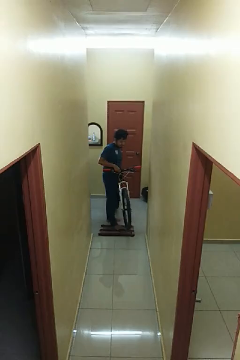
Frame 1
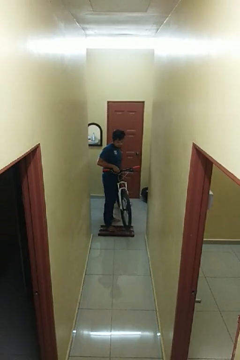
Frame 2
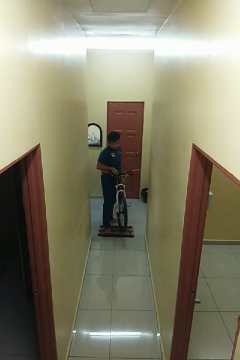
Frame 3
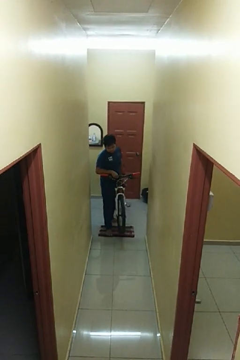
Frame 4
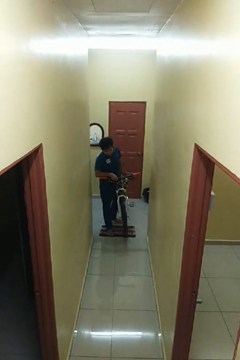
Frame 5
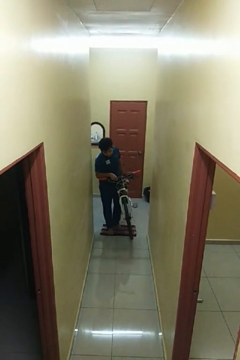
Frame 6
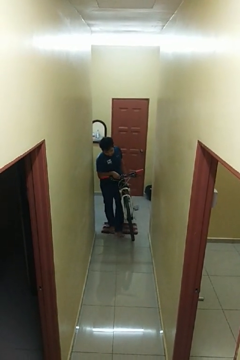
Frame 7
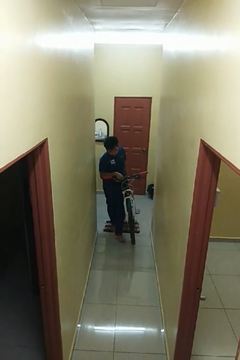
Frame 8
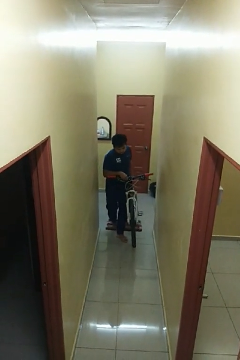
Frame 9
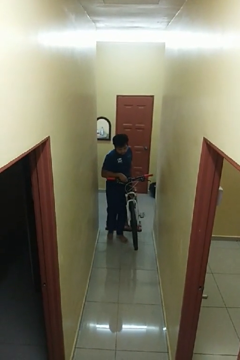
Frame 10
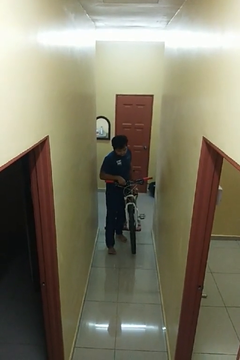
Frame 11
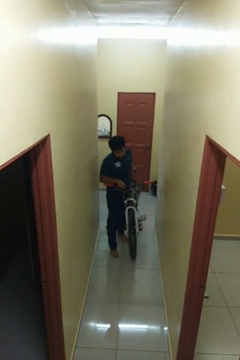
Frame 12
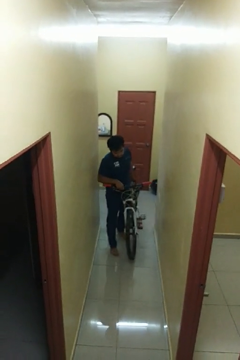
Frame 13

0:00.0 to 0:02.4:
person carries bicycle

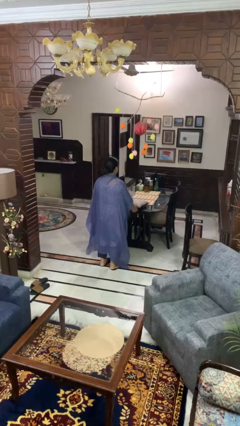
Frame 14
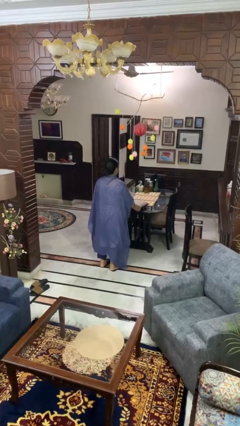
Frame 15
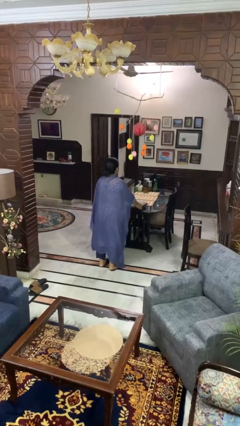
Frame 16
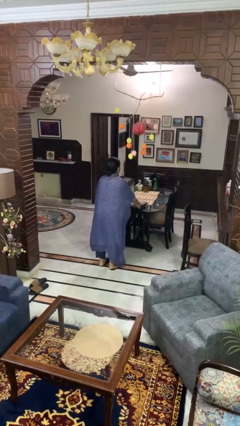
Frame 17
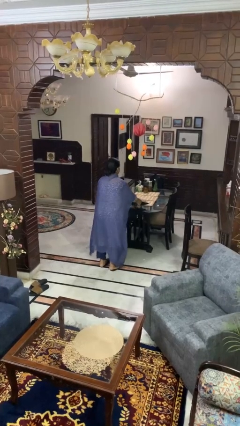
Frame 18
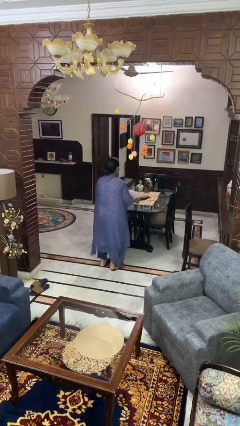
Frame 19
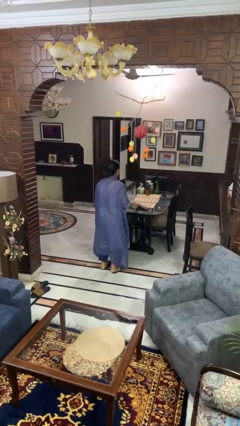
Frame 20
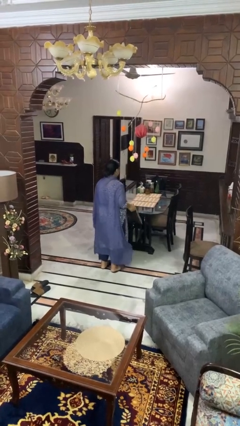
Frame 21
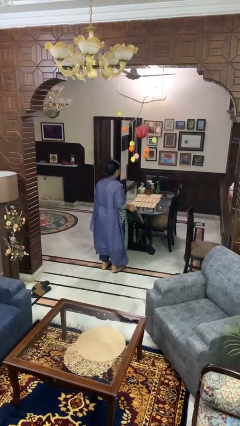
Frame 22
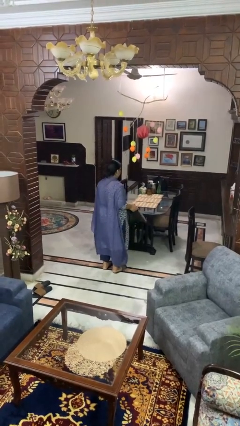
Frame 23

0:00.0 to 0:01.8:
person picks up object from table

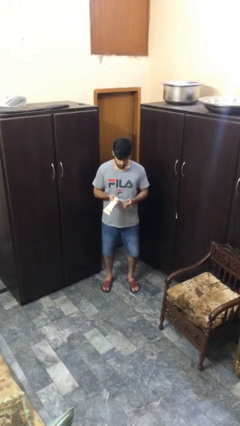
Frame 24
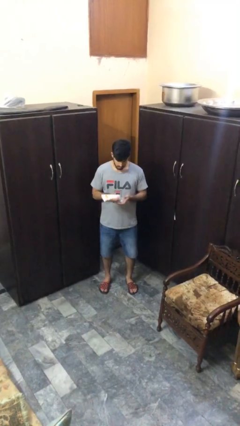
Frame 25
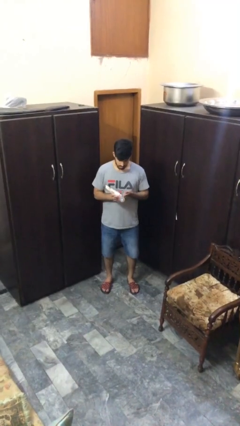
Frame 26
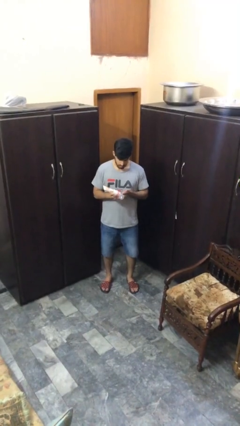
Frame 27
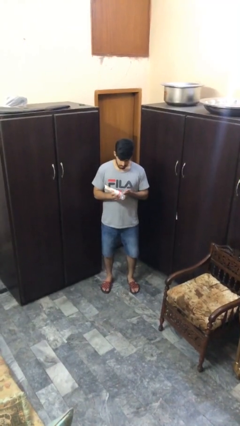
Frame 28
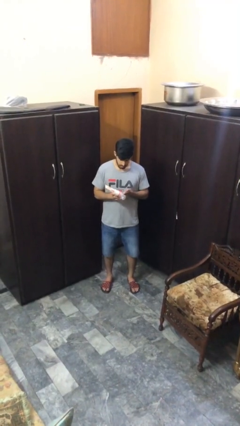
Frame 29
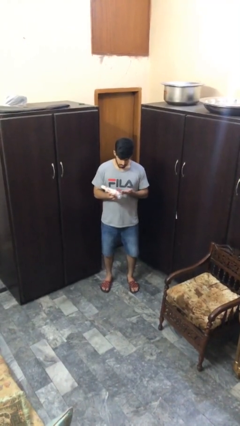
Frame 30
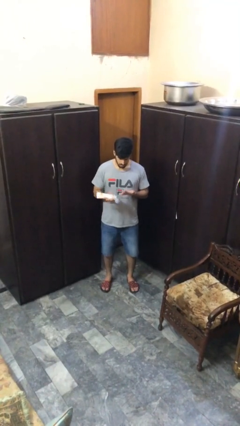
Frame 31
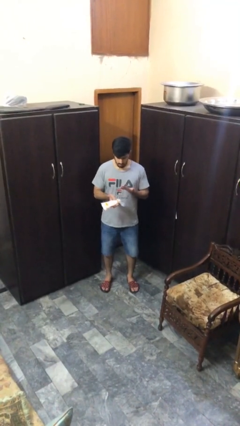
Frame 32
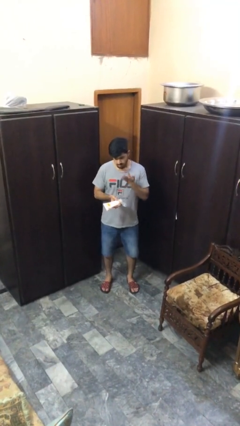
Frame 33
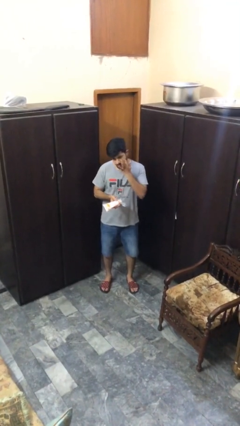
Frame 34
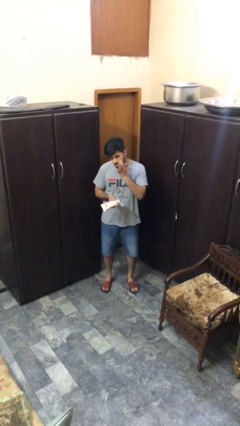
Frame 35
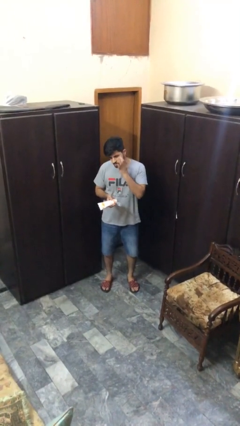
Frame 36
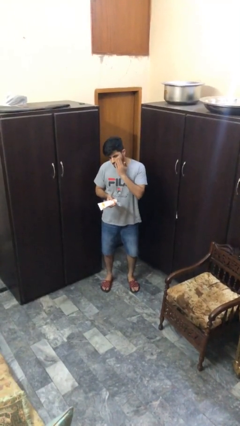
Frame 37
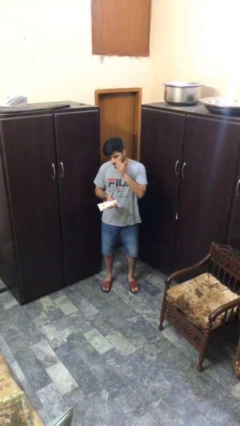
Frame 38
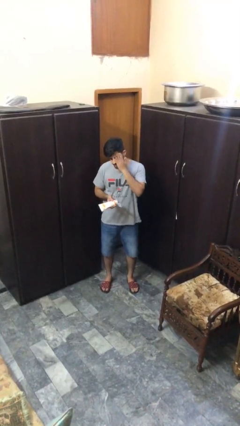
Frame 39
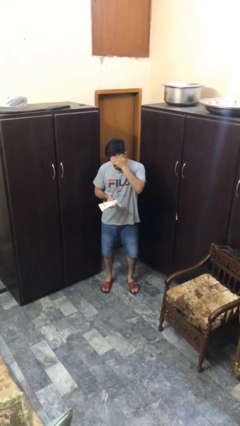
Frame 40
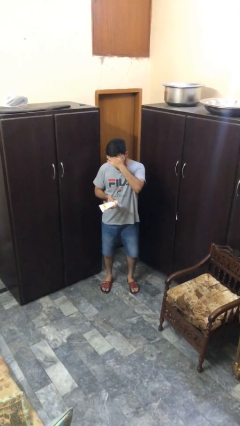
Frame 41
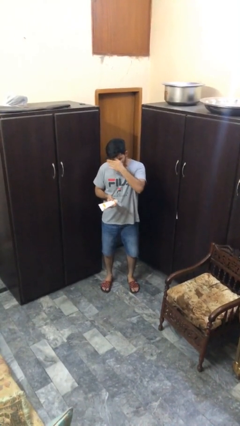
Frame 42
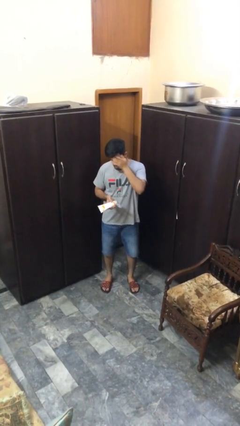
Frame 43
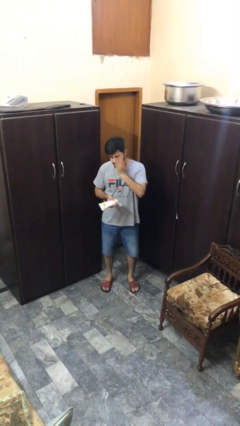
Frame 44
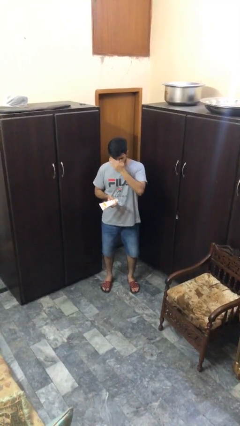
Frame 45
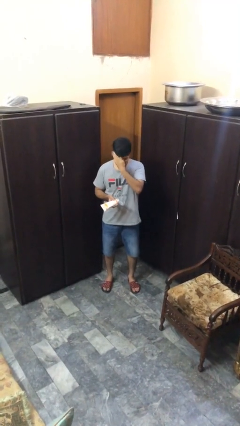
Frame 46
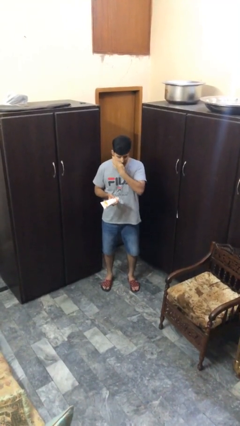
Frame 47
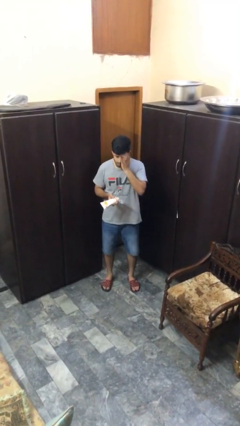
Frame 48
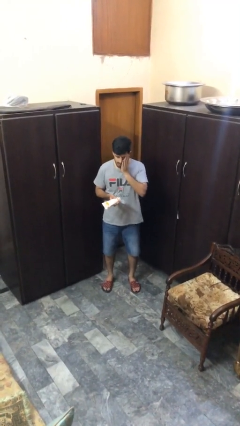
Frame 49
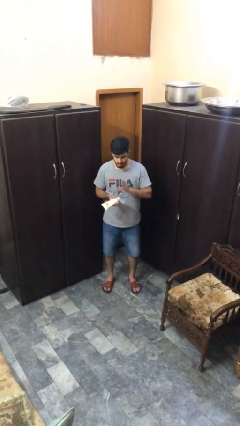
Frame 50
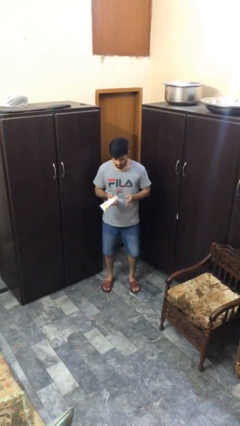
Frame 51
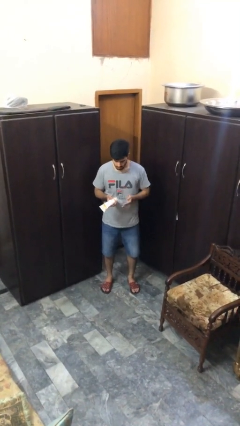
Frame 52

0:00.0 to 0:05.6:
person applies sunscreen

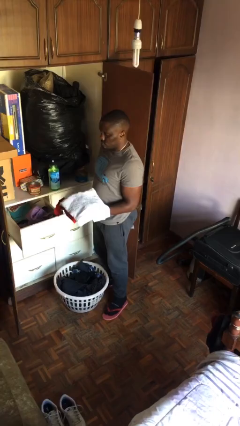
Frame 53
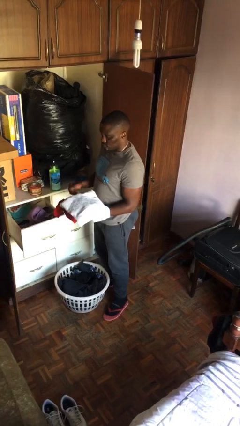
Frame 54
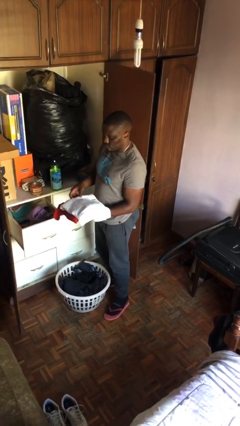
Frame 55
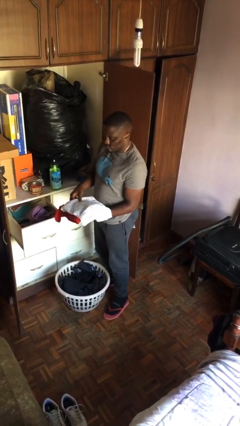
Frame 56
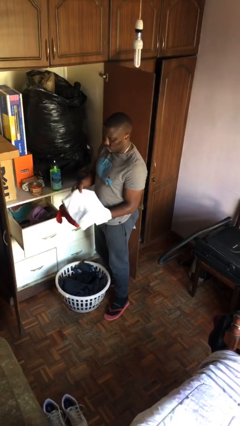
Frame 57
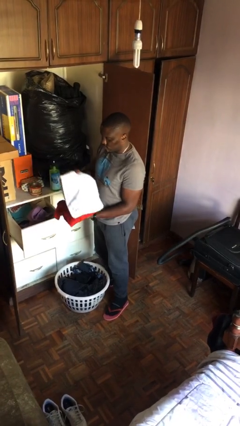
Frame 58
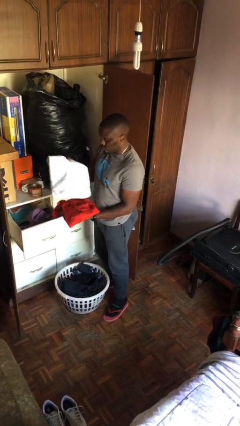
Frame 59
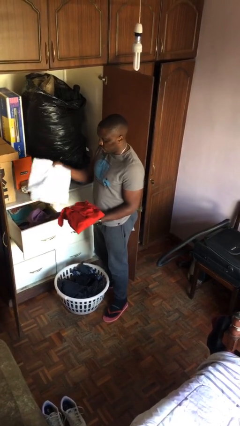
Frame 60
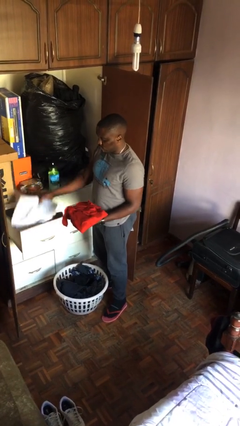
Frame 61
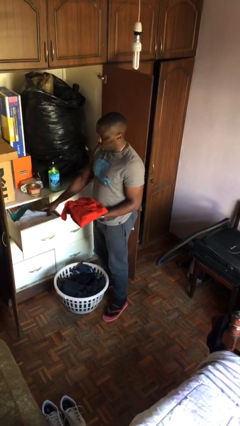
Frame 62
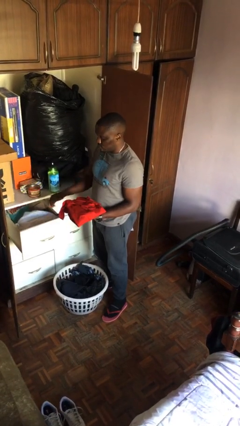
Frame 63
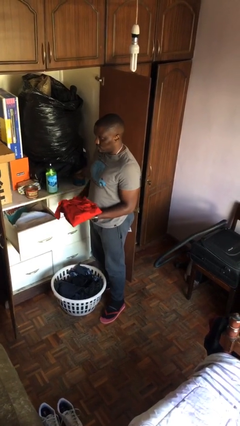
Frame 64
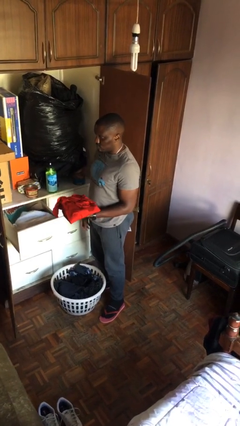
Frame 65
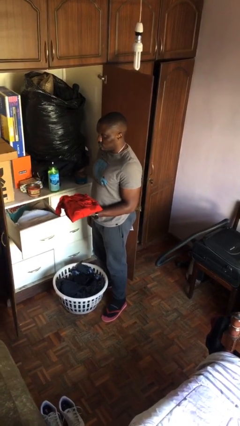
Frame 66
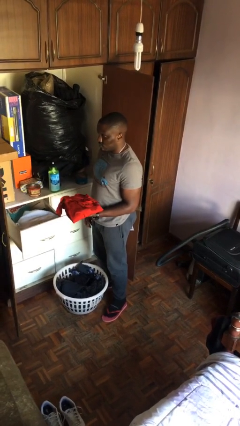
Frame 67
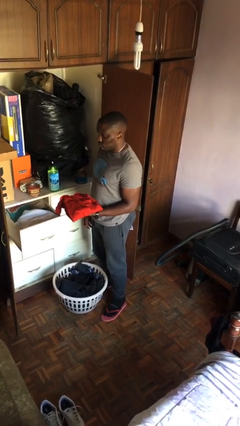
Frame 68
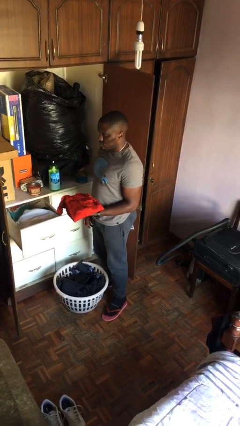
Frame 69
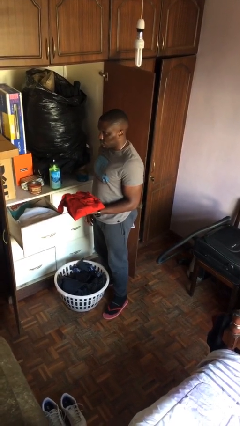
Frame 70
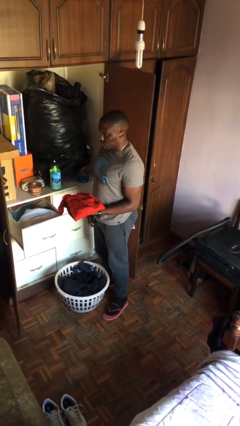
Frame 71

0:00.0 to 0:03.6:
person puts clothes into dresser

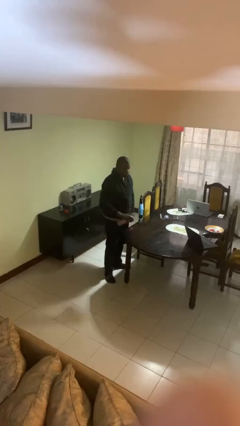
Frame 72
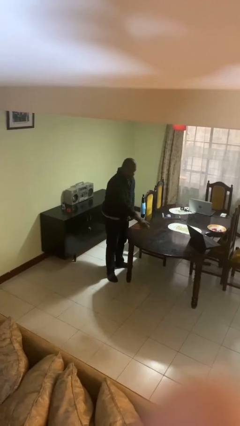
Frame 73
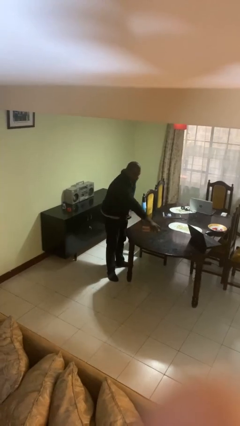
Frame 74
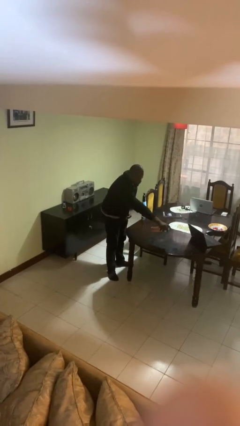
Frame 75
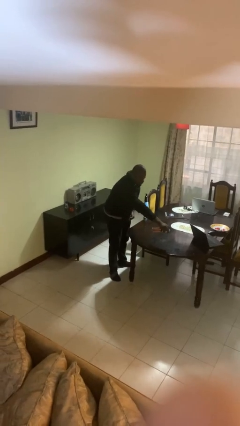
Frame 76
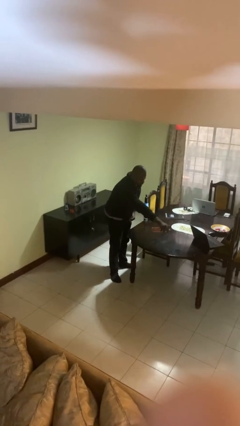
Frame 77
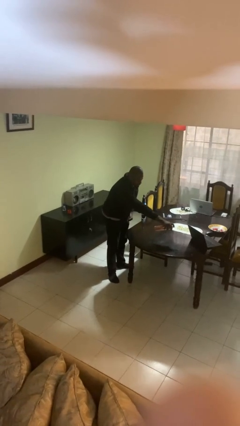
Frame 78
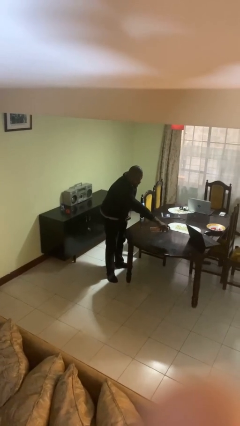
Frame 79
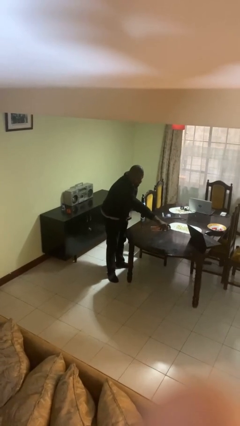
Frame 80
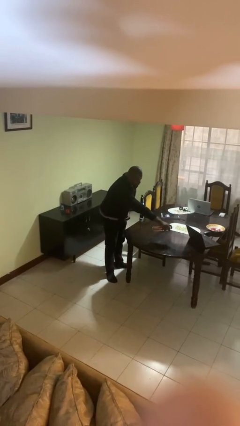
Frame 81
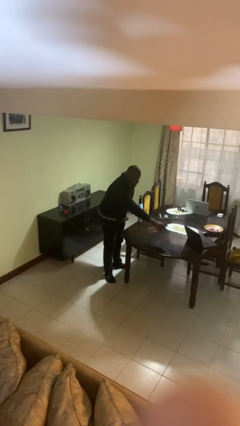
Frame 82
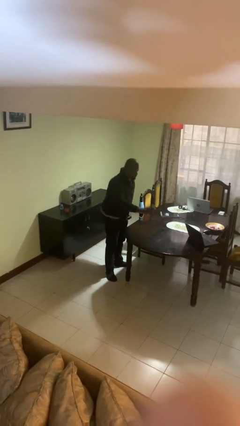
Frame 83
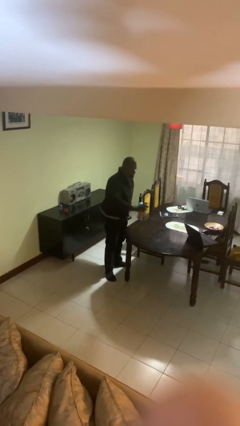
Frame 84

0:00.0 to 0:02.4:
person sprays from bottle

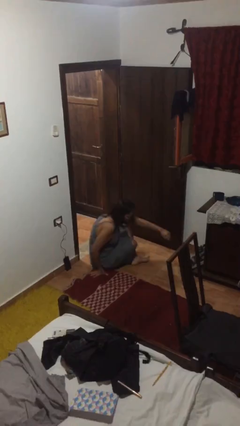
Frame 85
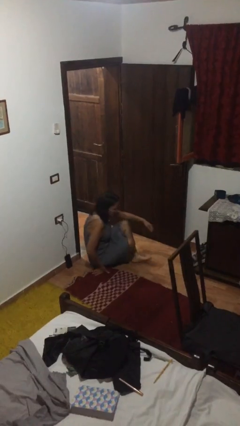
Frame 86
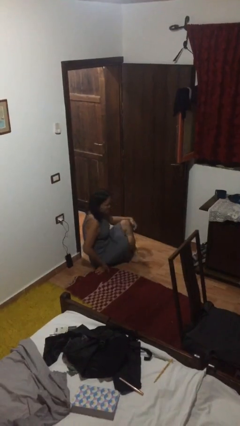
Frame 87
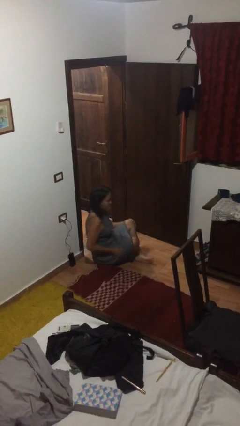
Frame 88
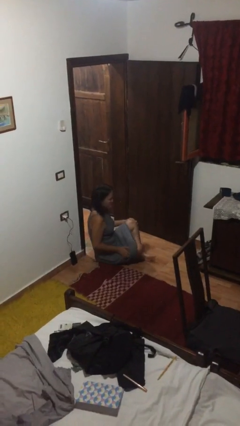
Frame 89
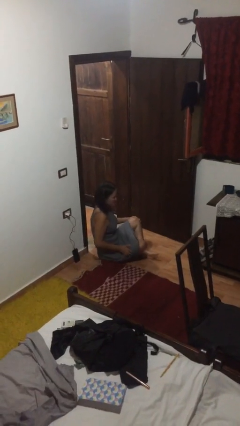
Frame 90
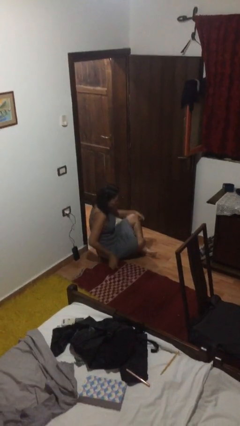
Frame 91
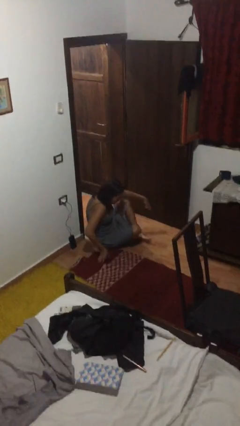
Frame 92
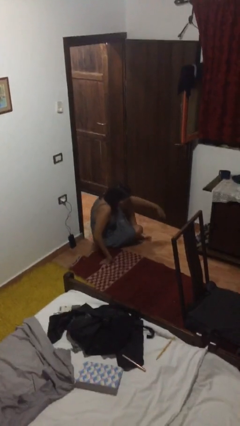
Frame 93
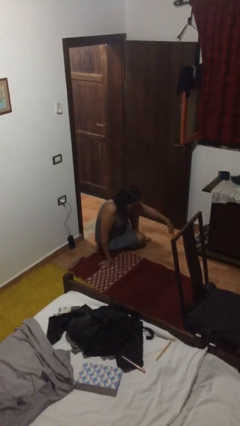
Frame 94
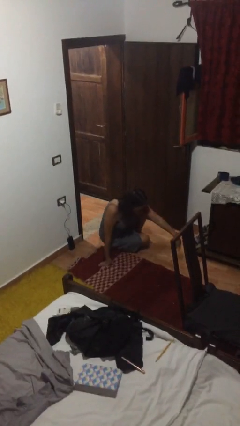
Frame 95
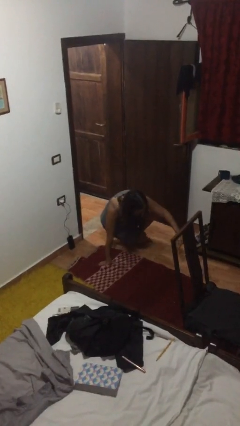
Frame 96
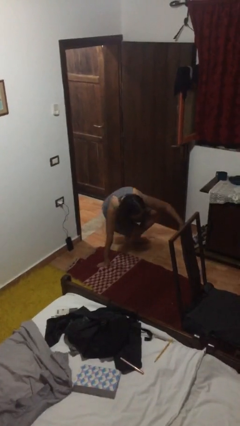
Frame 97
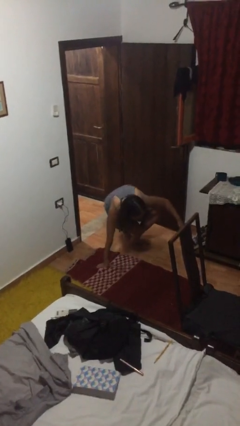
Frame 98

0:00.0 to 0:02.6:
person sits crisscross
